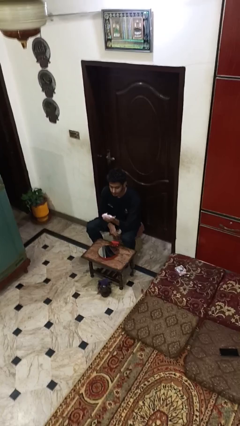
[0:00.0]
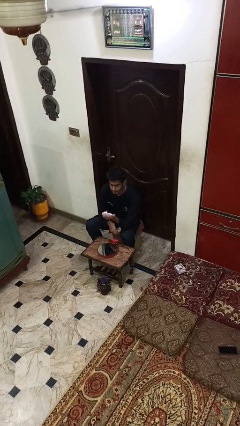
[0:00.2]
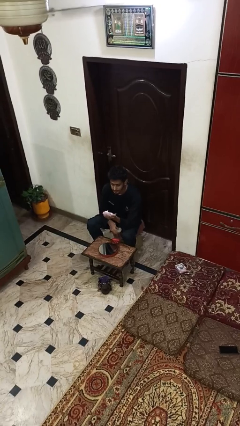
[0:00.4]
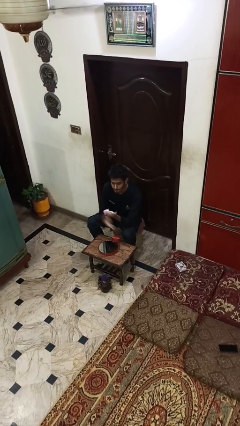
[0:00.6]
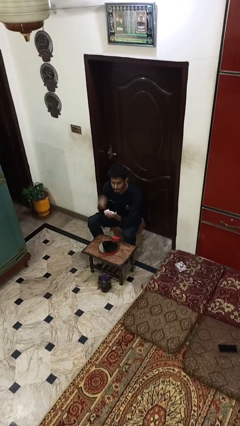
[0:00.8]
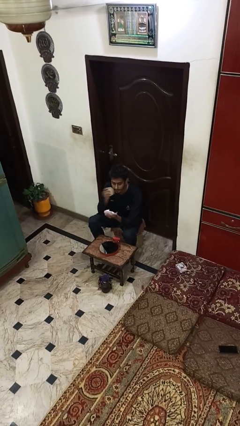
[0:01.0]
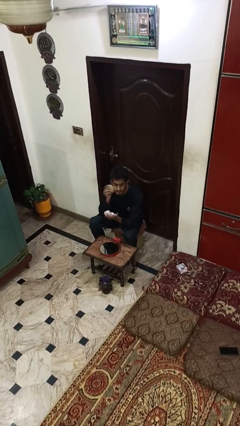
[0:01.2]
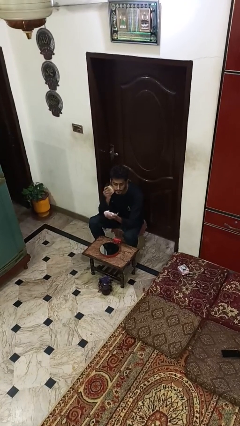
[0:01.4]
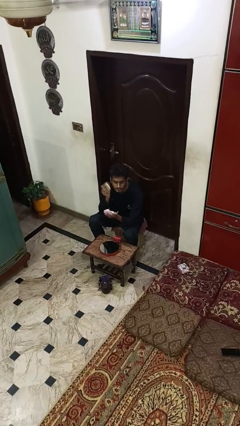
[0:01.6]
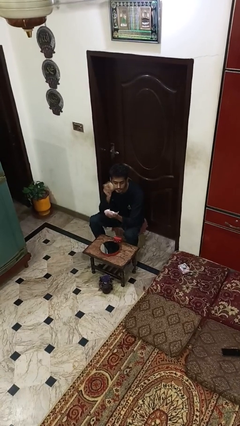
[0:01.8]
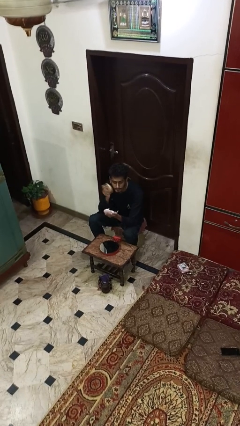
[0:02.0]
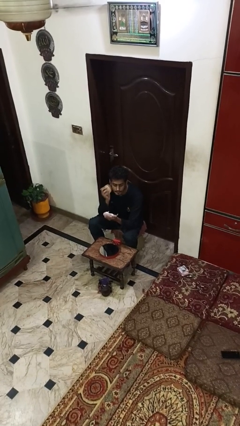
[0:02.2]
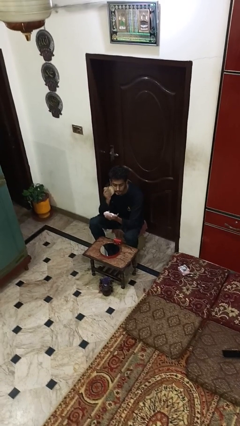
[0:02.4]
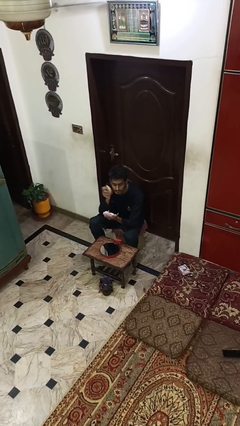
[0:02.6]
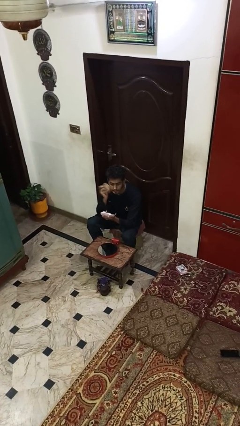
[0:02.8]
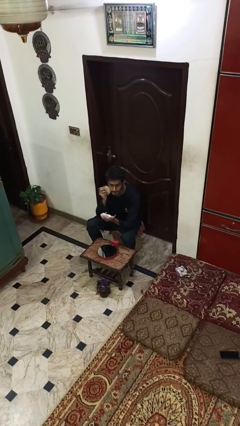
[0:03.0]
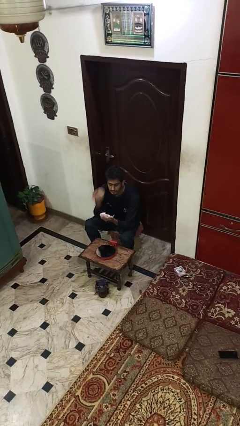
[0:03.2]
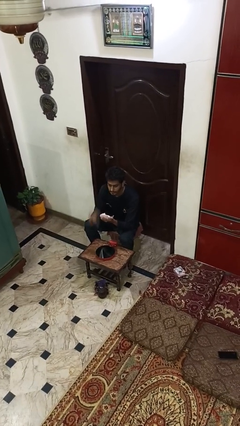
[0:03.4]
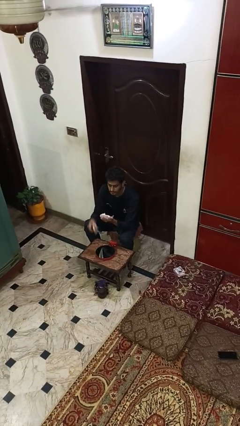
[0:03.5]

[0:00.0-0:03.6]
person applies foundation makeup

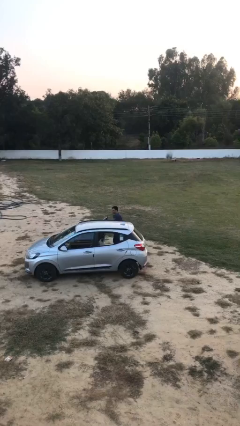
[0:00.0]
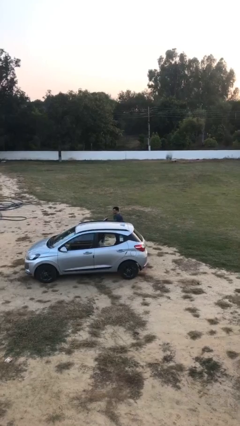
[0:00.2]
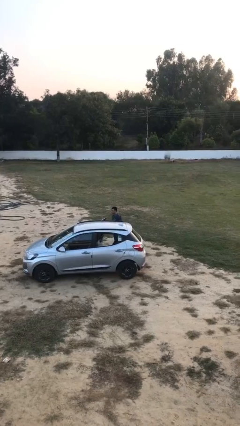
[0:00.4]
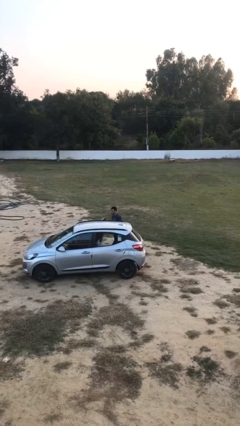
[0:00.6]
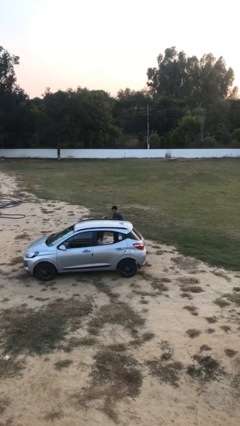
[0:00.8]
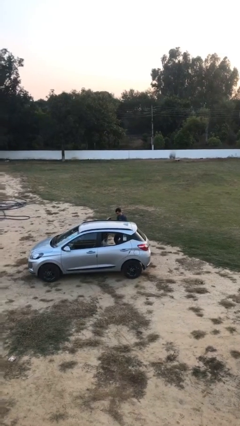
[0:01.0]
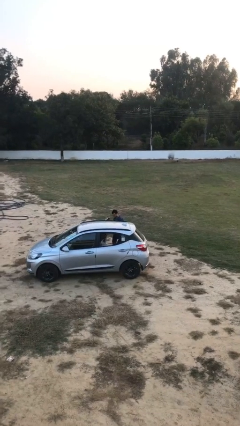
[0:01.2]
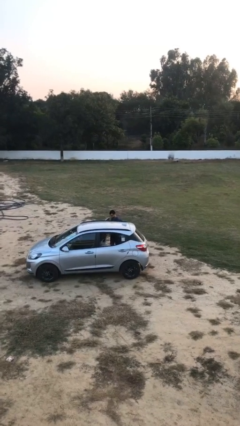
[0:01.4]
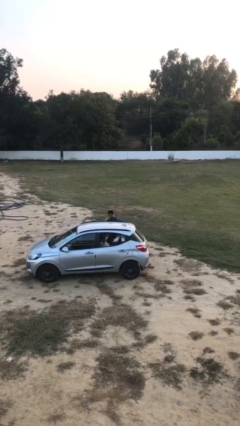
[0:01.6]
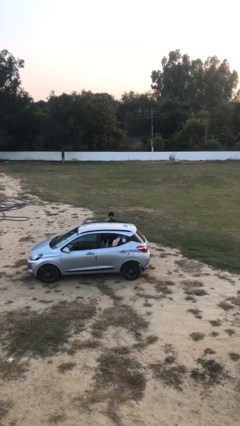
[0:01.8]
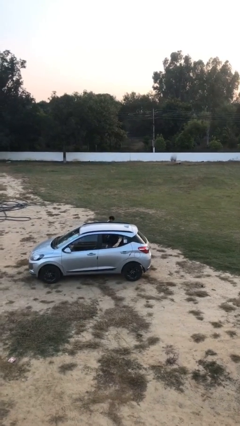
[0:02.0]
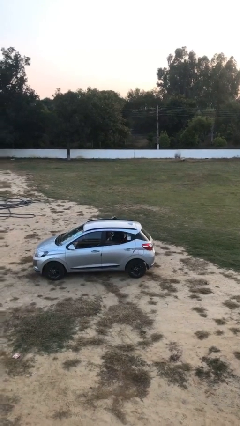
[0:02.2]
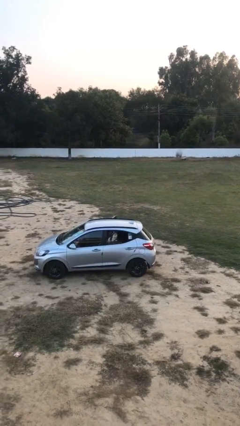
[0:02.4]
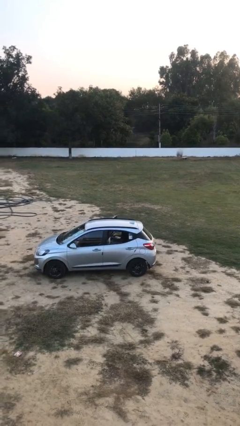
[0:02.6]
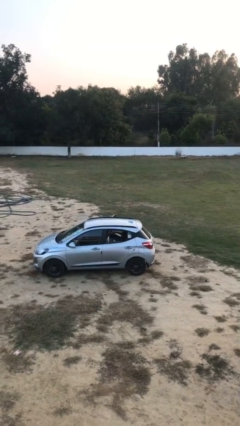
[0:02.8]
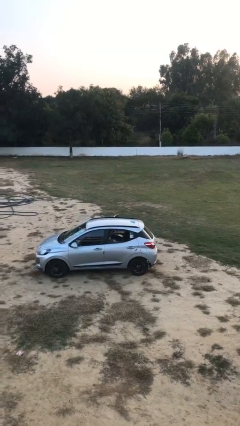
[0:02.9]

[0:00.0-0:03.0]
person enters car

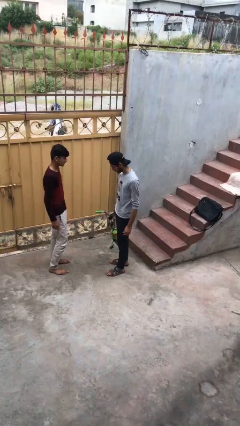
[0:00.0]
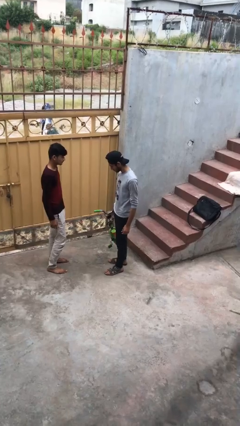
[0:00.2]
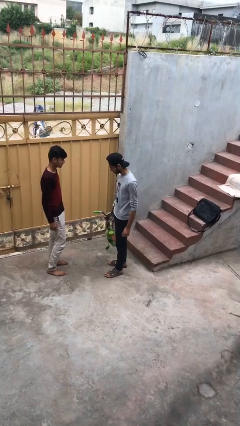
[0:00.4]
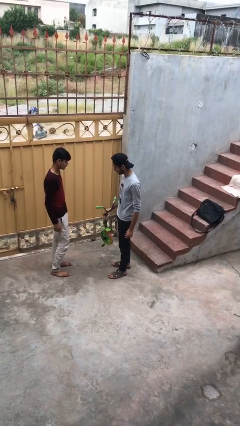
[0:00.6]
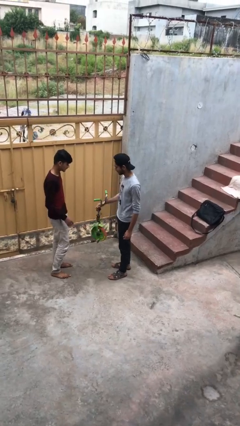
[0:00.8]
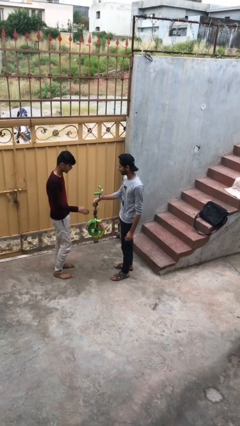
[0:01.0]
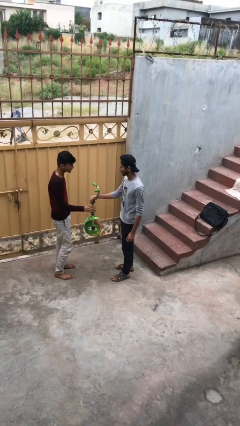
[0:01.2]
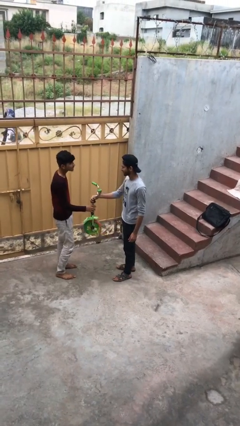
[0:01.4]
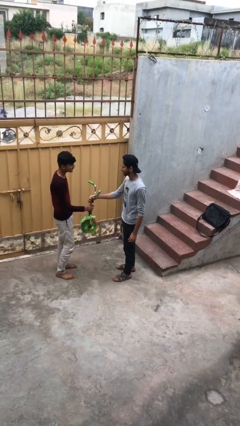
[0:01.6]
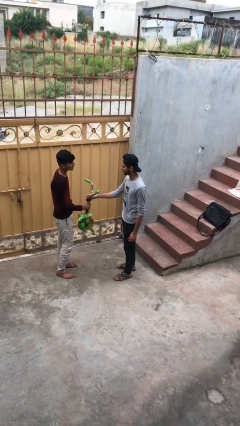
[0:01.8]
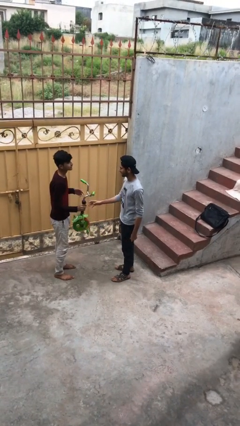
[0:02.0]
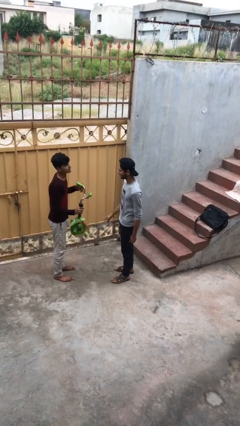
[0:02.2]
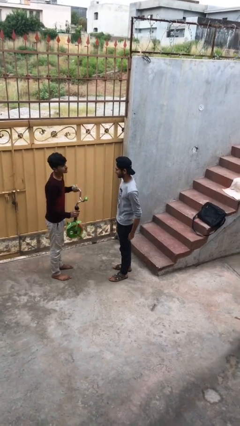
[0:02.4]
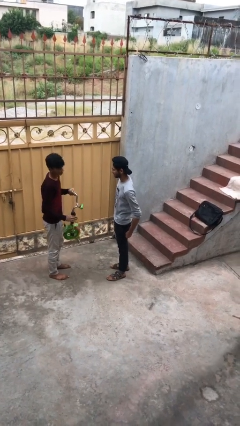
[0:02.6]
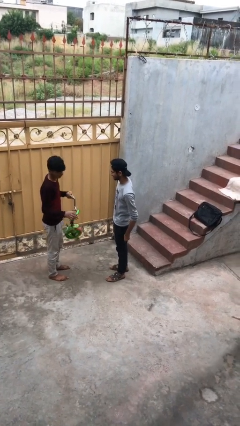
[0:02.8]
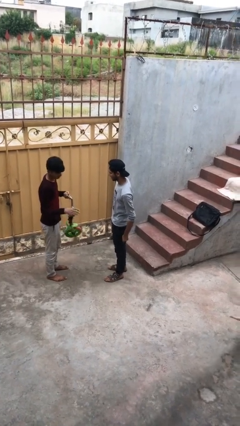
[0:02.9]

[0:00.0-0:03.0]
person transfers object to person

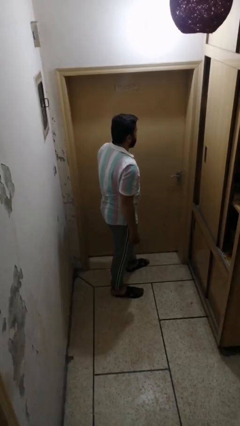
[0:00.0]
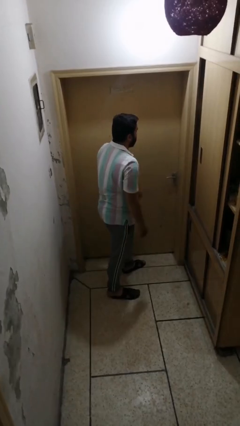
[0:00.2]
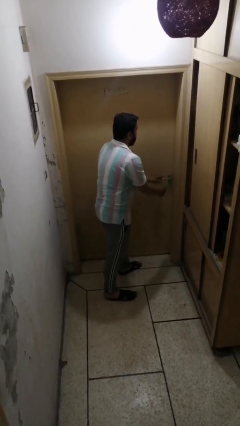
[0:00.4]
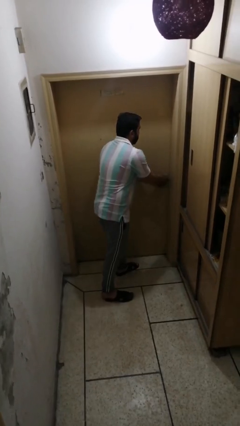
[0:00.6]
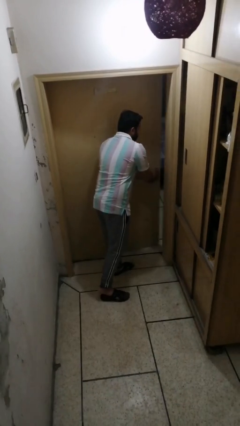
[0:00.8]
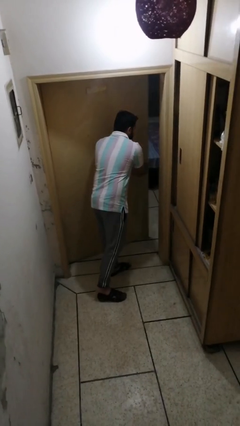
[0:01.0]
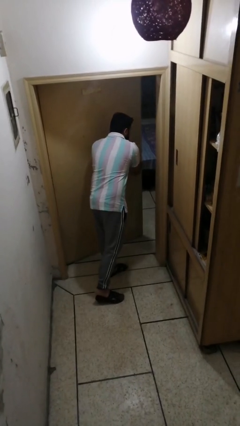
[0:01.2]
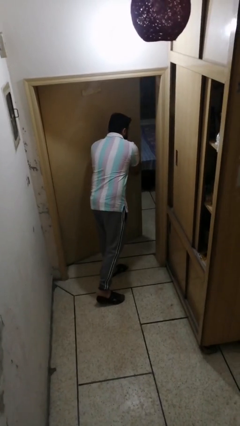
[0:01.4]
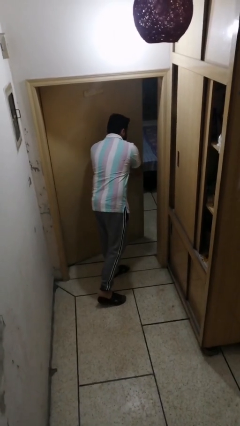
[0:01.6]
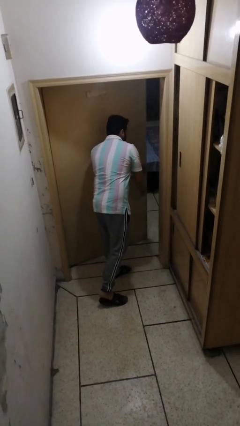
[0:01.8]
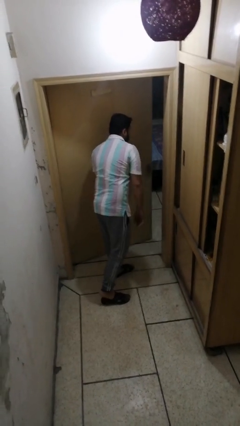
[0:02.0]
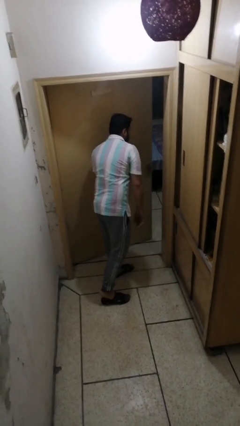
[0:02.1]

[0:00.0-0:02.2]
person opens facility door

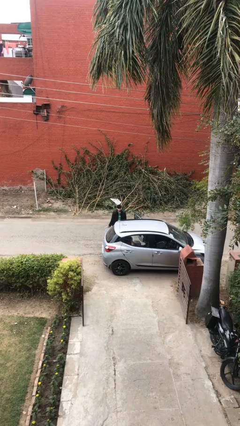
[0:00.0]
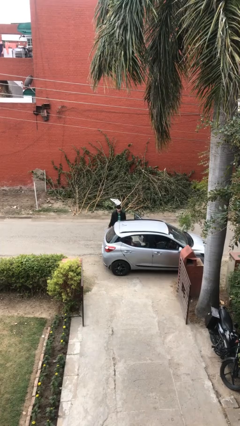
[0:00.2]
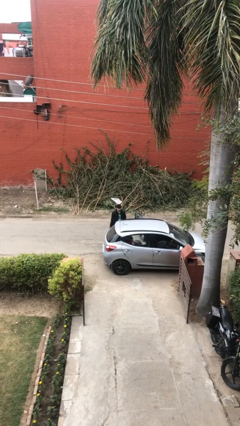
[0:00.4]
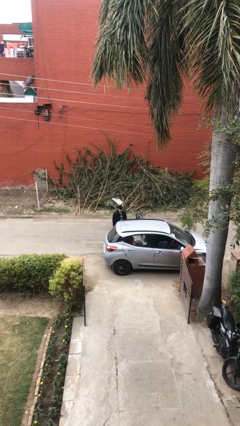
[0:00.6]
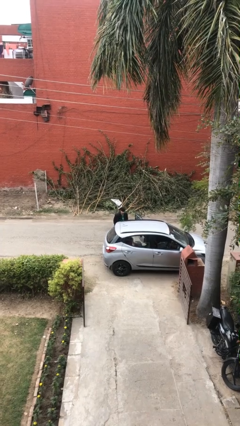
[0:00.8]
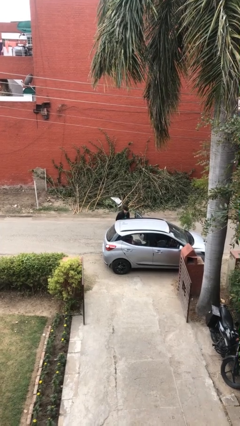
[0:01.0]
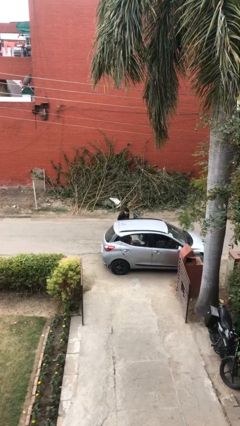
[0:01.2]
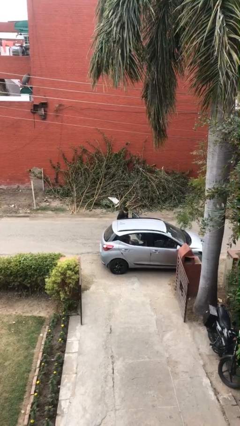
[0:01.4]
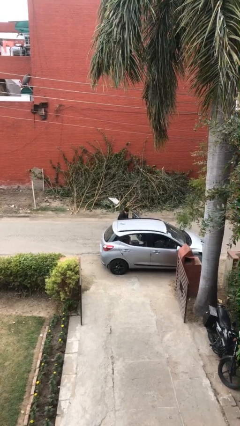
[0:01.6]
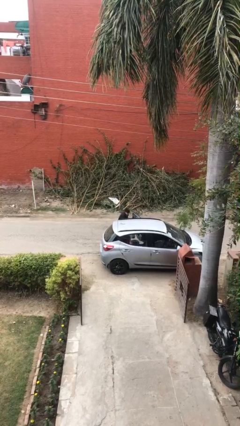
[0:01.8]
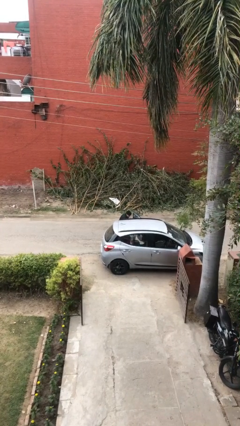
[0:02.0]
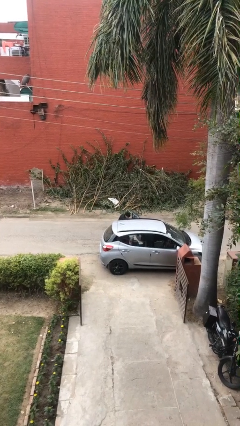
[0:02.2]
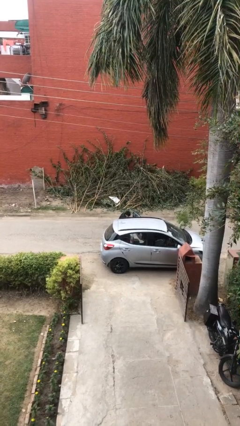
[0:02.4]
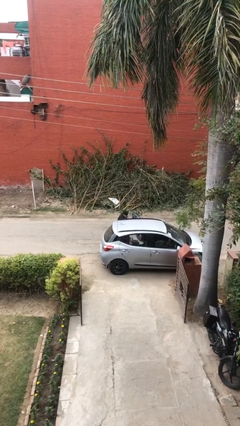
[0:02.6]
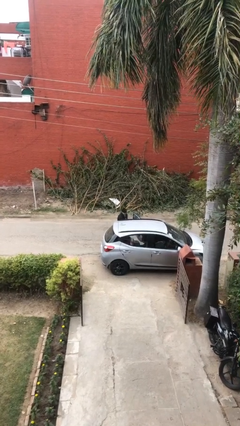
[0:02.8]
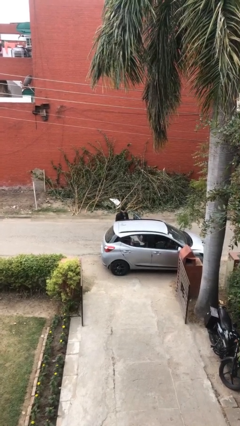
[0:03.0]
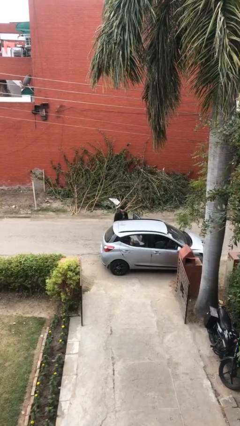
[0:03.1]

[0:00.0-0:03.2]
person loads car

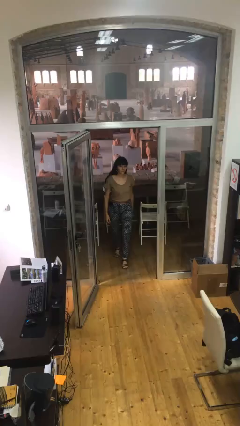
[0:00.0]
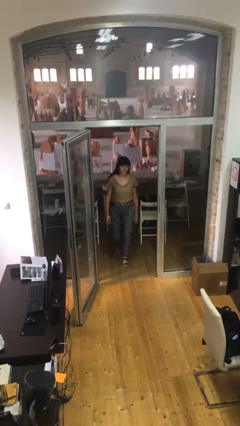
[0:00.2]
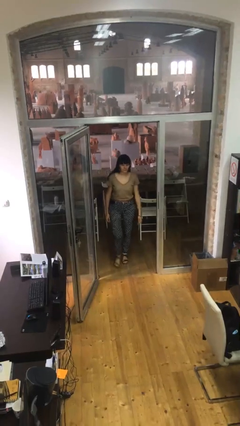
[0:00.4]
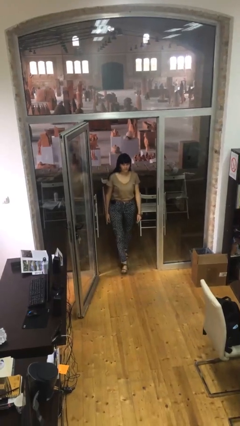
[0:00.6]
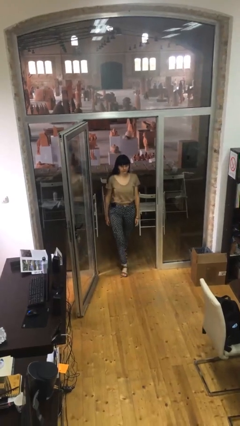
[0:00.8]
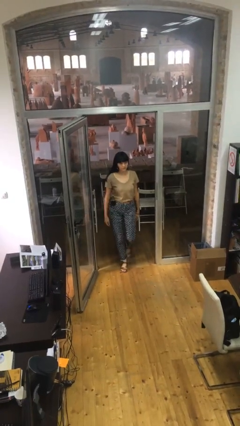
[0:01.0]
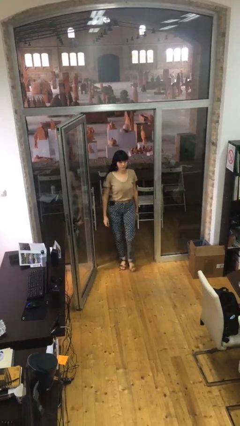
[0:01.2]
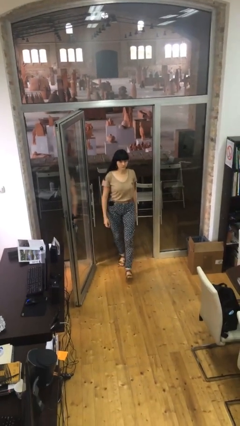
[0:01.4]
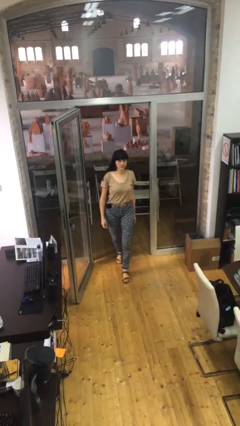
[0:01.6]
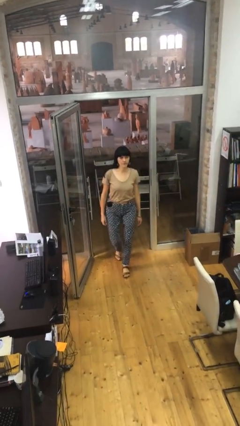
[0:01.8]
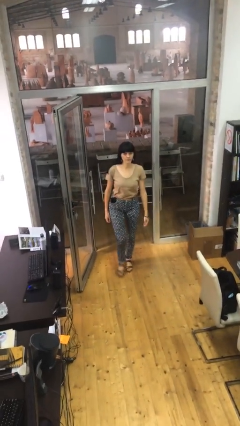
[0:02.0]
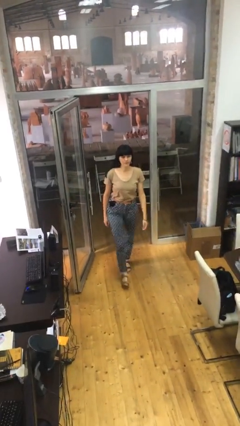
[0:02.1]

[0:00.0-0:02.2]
person enters scene through structure
